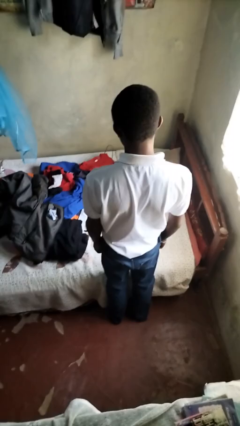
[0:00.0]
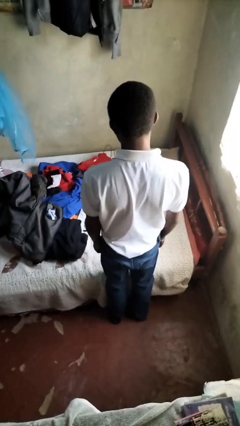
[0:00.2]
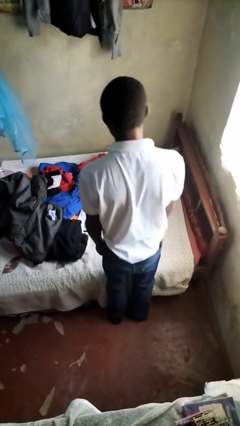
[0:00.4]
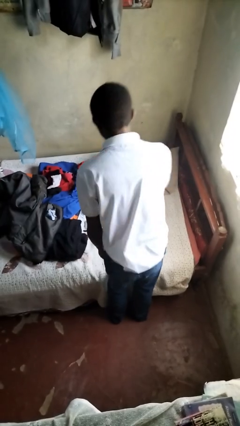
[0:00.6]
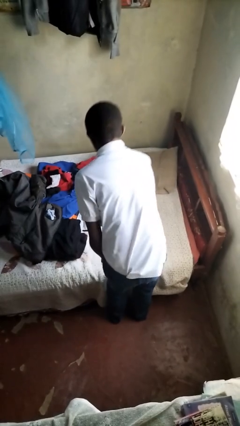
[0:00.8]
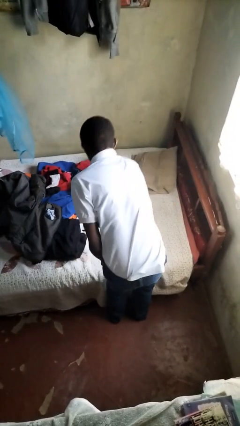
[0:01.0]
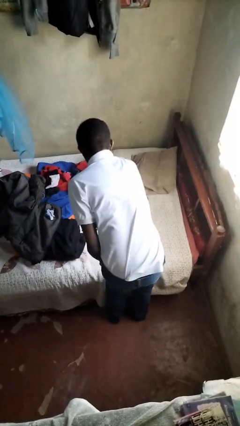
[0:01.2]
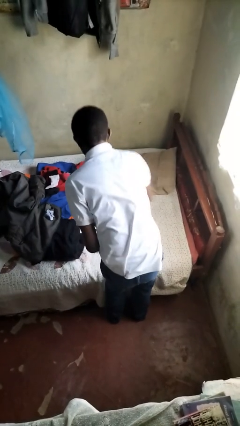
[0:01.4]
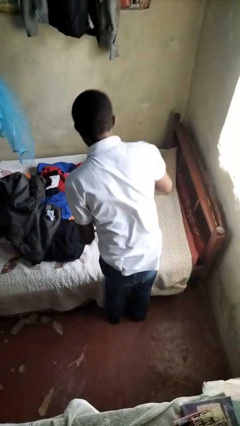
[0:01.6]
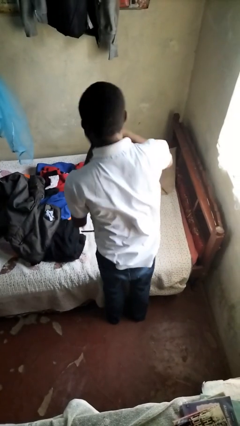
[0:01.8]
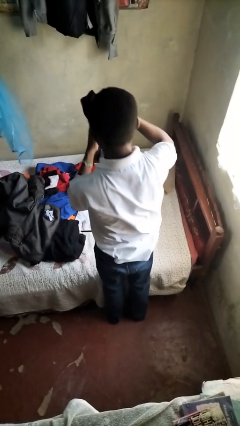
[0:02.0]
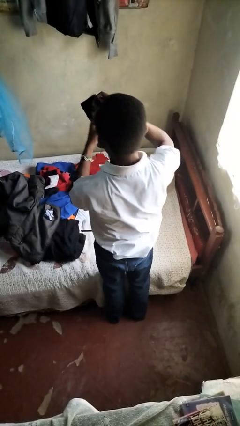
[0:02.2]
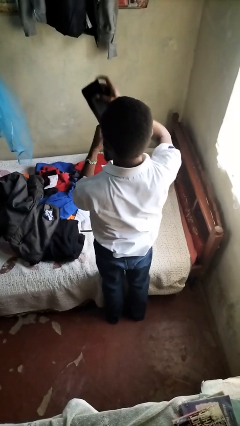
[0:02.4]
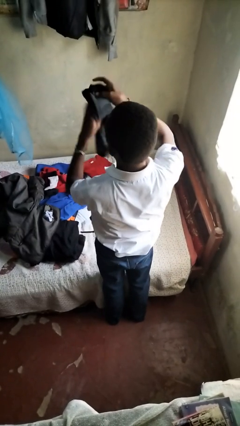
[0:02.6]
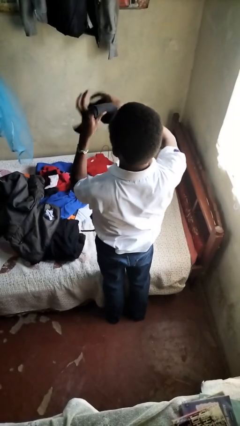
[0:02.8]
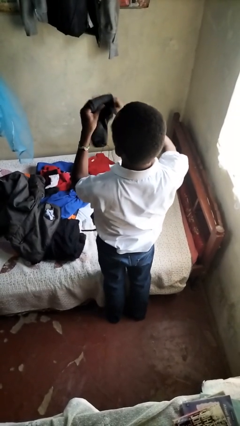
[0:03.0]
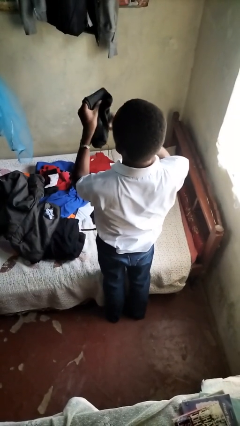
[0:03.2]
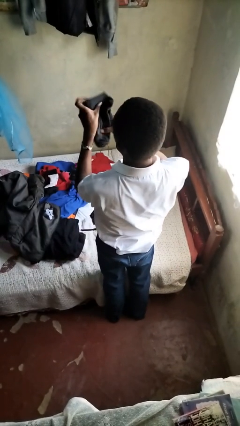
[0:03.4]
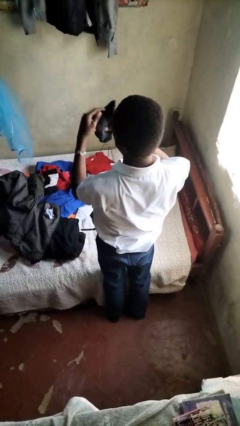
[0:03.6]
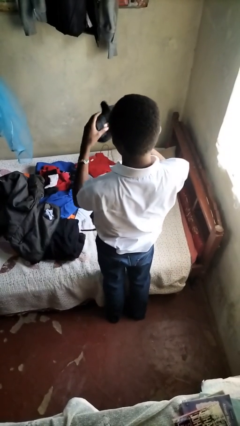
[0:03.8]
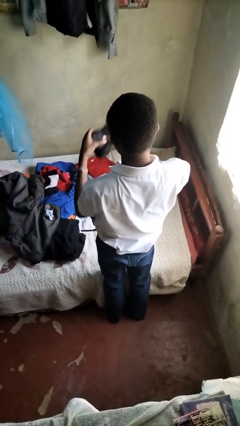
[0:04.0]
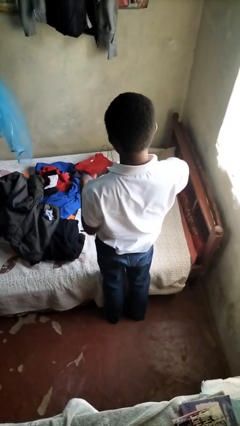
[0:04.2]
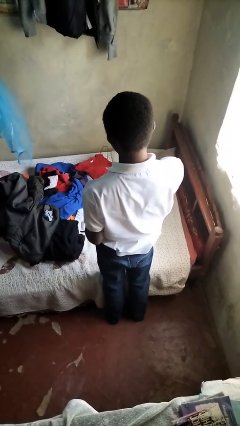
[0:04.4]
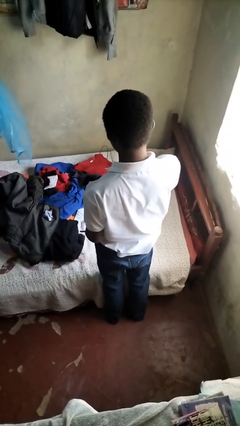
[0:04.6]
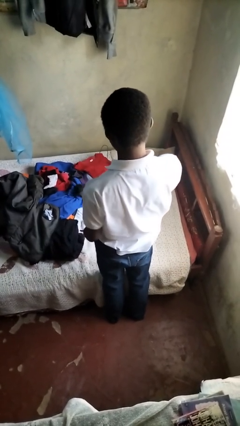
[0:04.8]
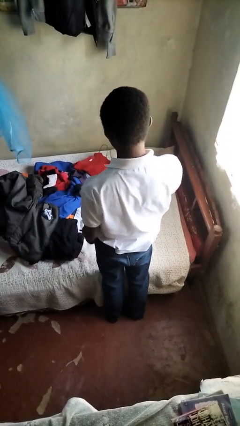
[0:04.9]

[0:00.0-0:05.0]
person folds socks

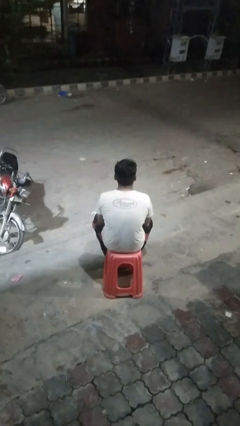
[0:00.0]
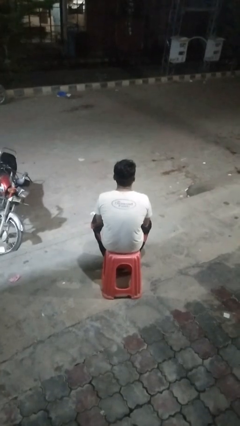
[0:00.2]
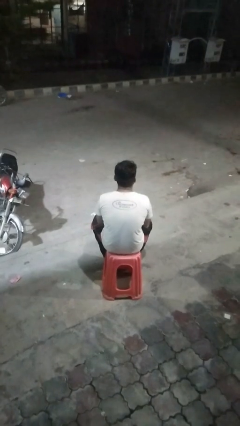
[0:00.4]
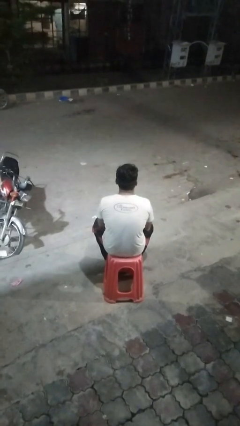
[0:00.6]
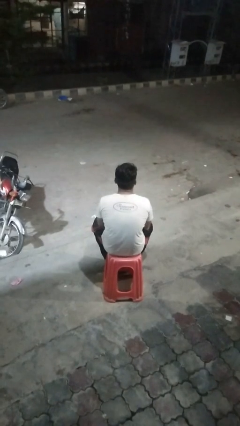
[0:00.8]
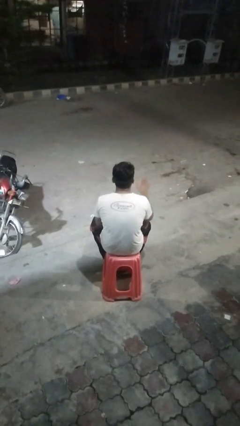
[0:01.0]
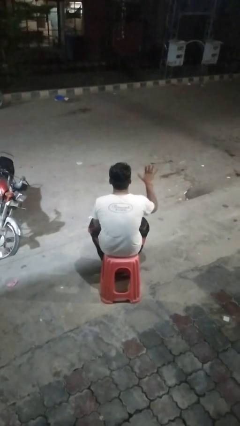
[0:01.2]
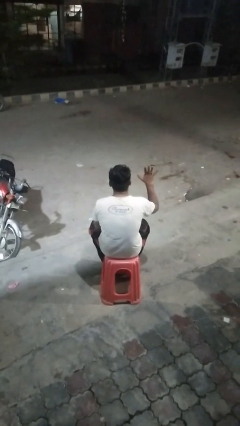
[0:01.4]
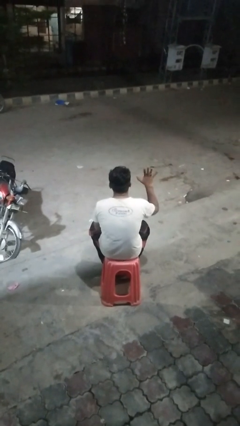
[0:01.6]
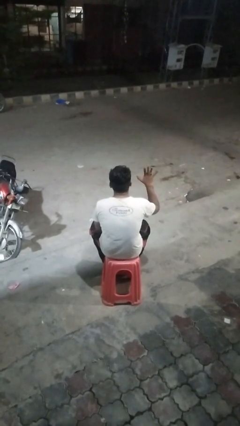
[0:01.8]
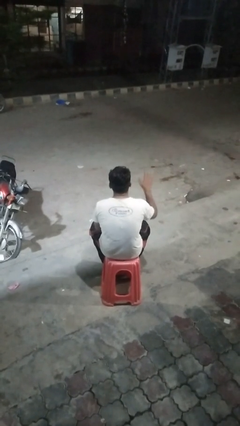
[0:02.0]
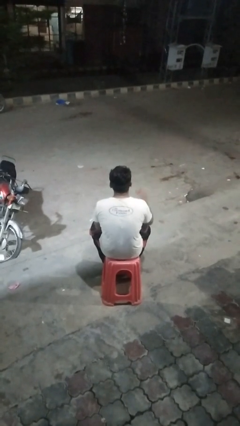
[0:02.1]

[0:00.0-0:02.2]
person gestures number five

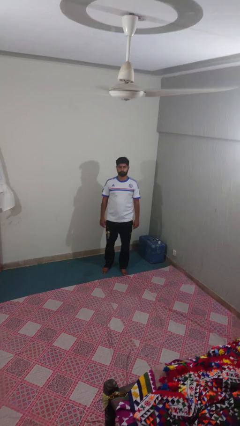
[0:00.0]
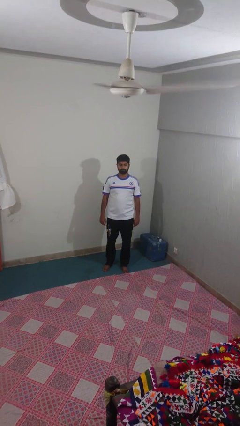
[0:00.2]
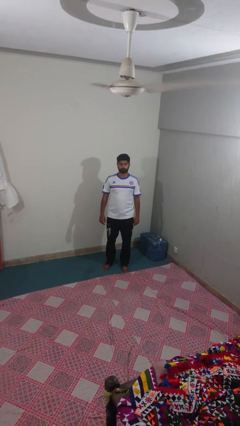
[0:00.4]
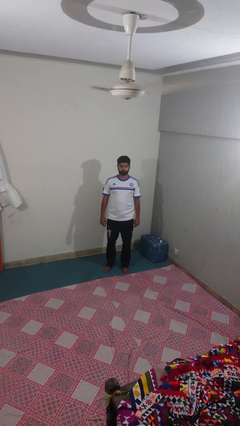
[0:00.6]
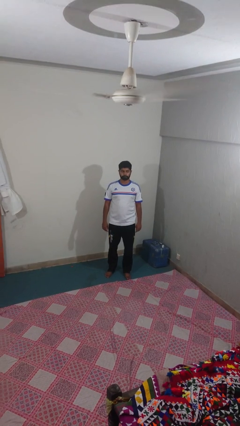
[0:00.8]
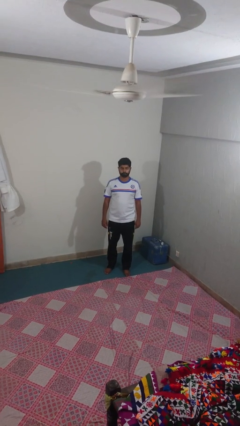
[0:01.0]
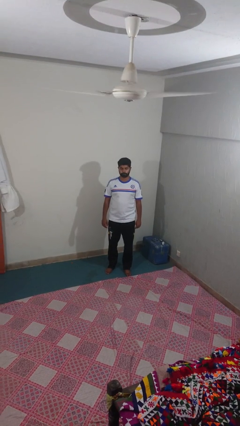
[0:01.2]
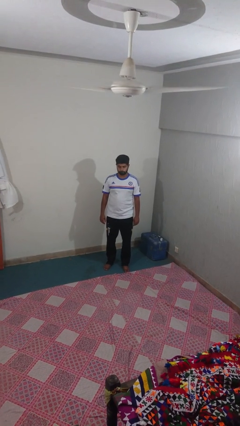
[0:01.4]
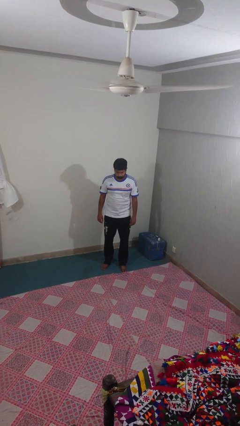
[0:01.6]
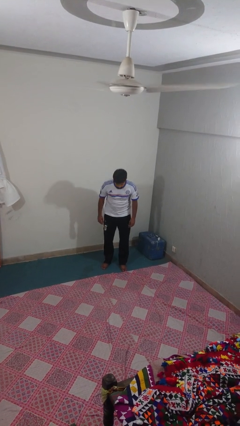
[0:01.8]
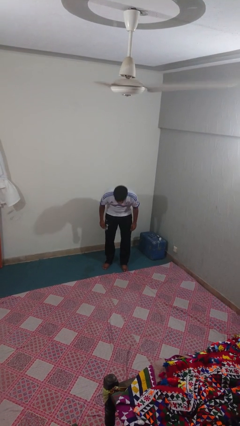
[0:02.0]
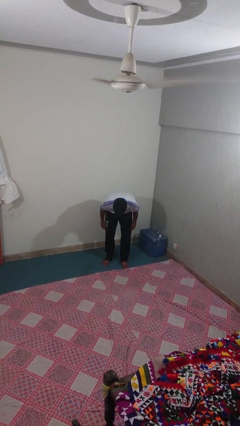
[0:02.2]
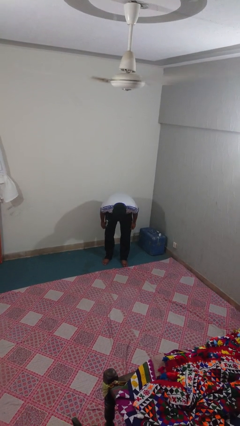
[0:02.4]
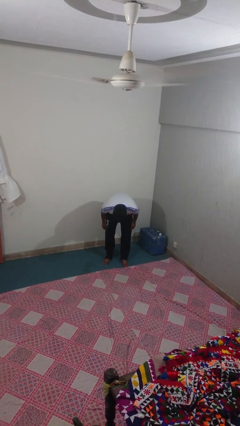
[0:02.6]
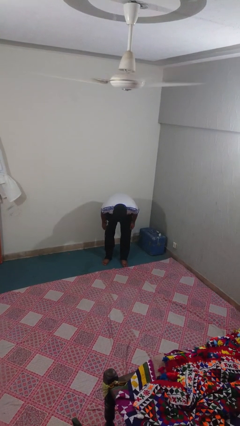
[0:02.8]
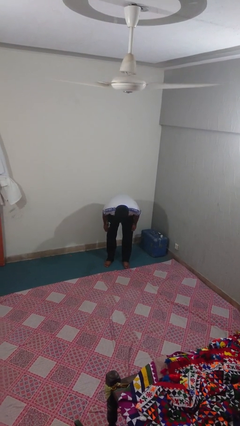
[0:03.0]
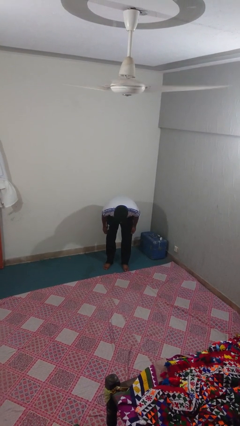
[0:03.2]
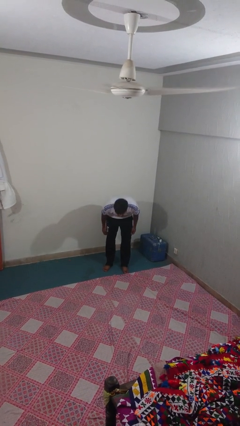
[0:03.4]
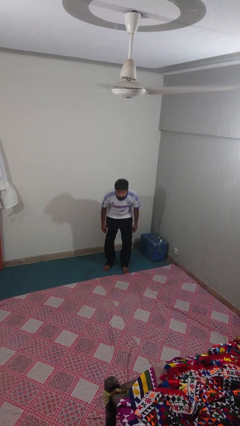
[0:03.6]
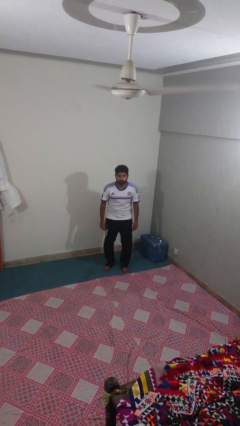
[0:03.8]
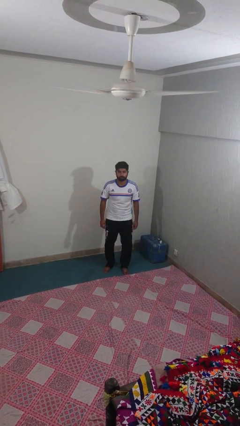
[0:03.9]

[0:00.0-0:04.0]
person bows

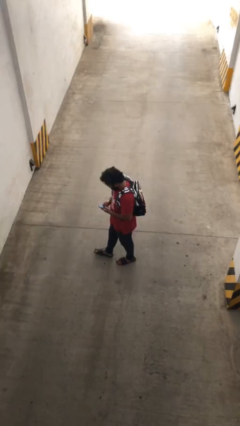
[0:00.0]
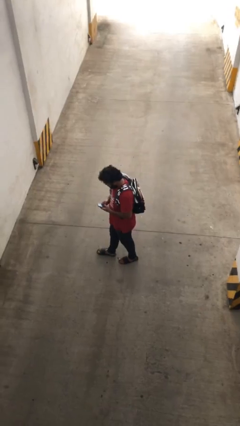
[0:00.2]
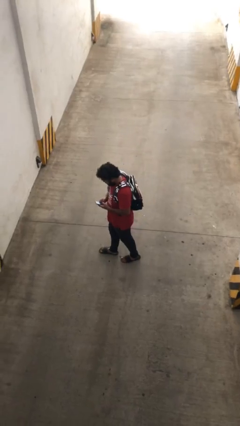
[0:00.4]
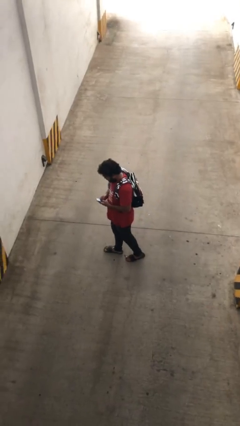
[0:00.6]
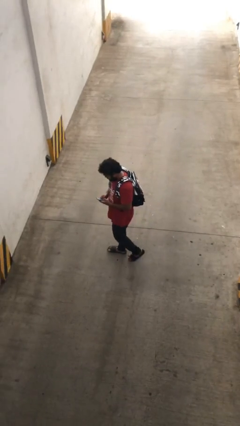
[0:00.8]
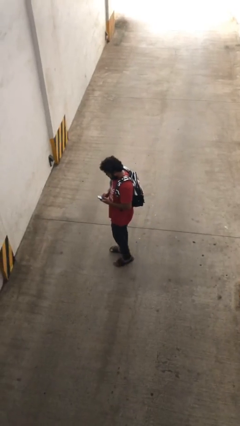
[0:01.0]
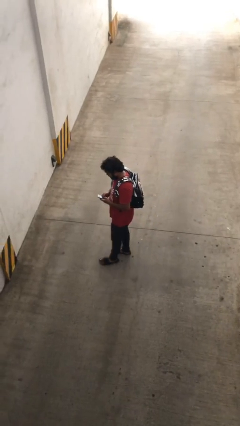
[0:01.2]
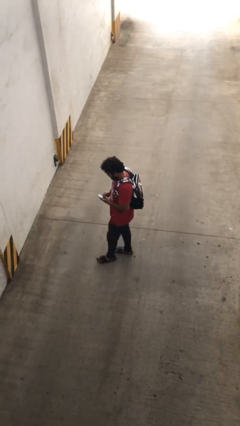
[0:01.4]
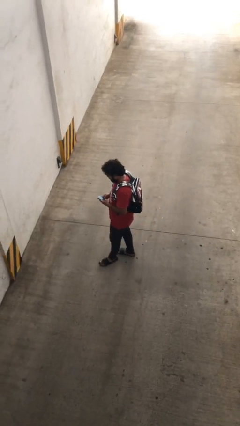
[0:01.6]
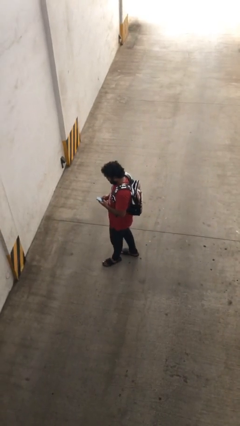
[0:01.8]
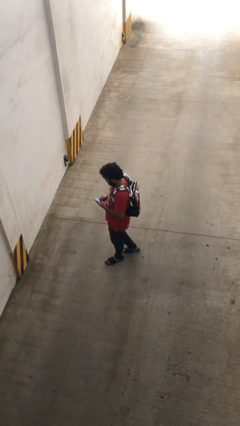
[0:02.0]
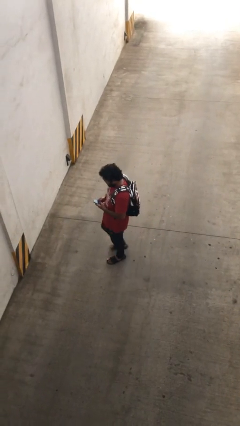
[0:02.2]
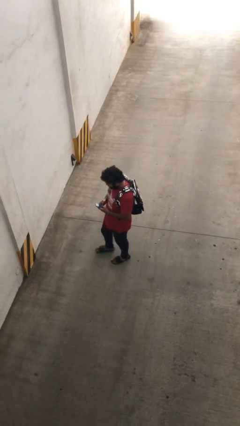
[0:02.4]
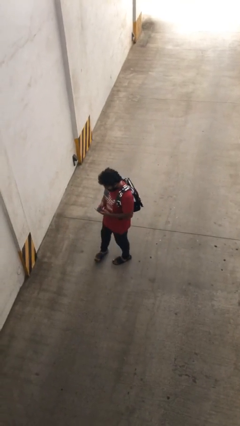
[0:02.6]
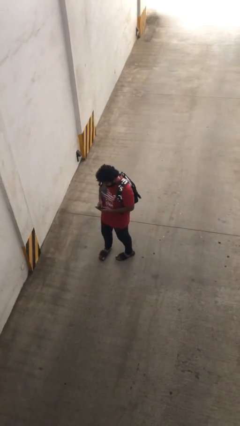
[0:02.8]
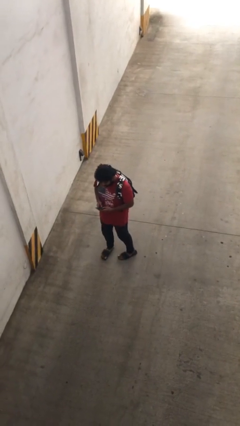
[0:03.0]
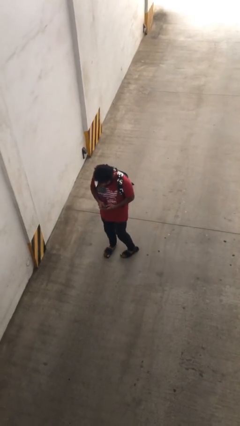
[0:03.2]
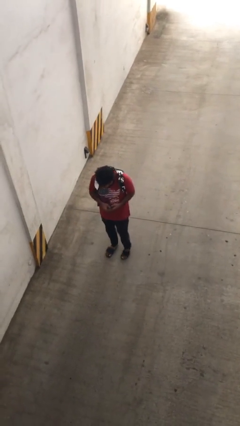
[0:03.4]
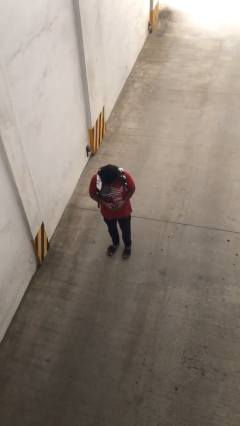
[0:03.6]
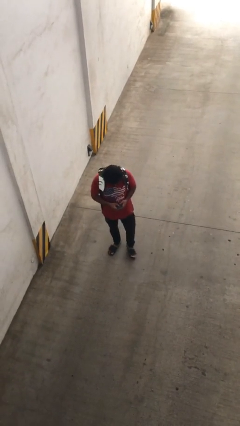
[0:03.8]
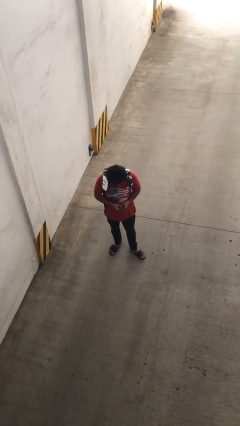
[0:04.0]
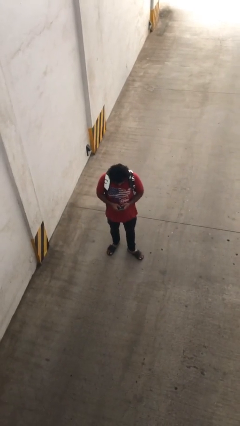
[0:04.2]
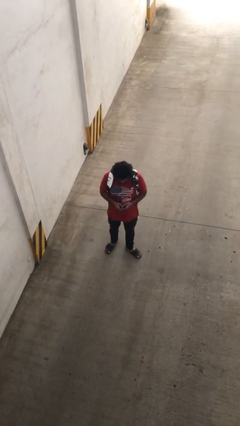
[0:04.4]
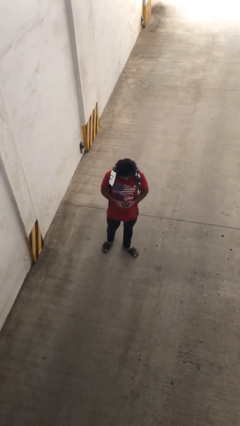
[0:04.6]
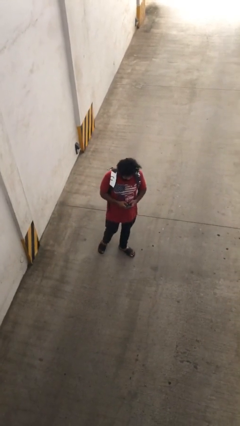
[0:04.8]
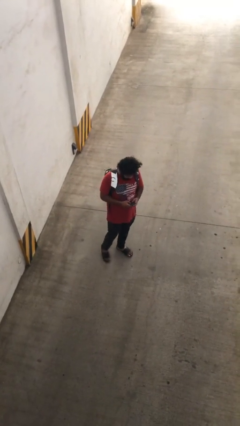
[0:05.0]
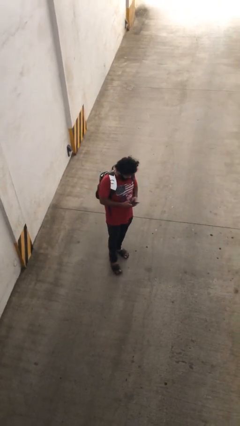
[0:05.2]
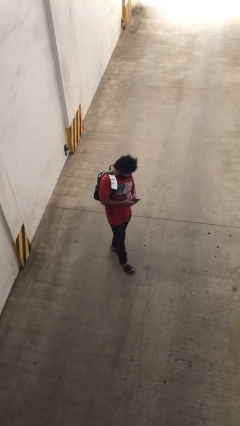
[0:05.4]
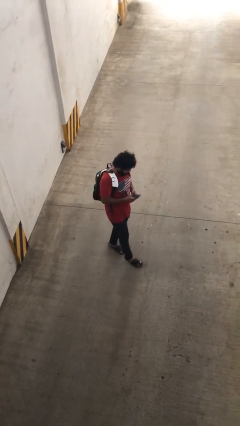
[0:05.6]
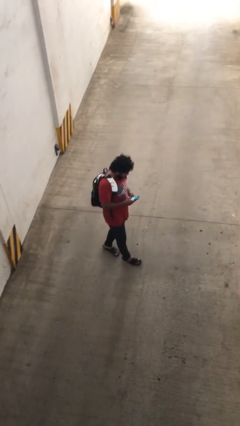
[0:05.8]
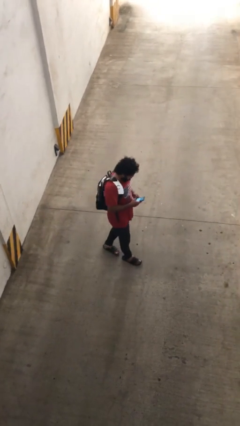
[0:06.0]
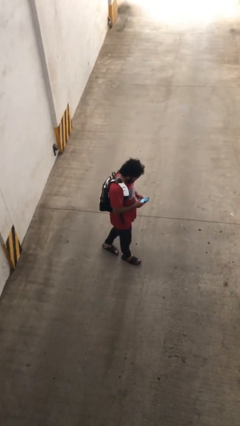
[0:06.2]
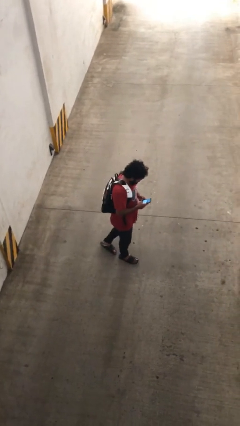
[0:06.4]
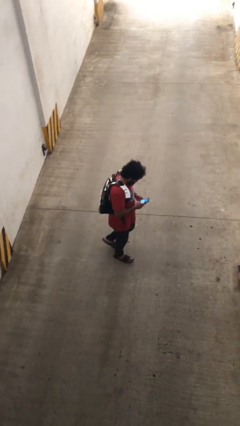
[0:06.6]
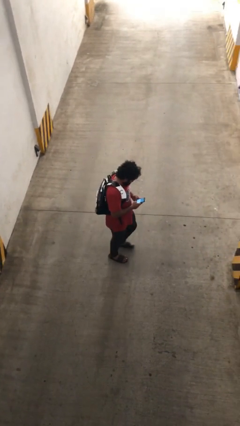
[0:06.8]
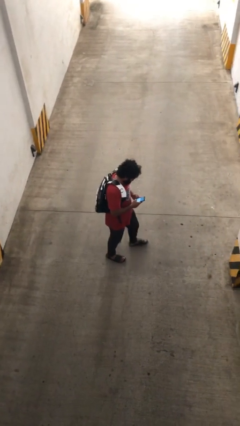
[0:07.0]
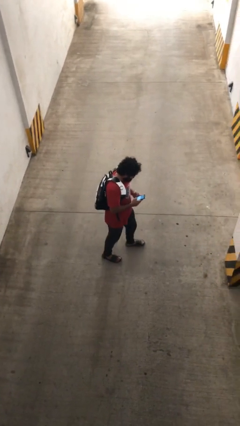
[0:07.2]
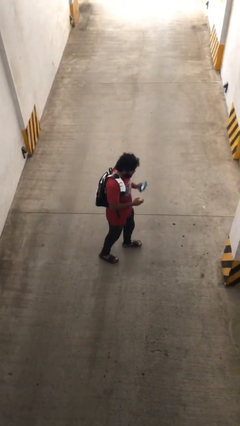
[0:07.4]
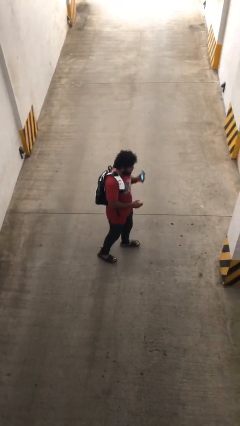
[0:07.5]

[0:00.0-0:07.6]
person texts on phone
